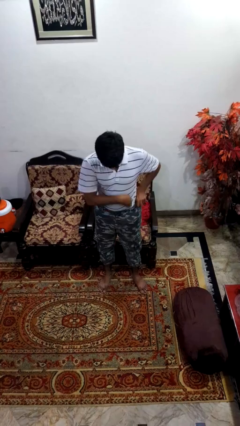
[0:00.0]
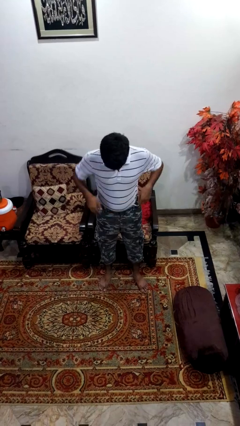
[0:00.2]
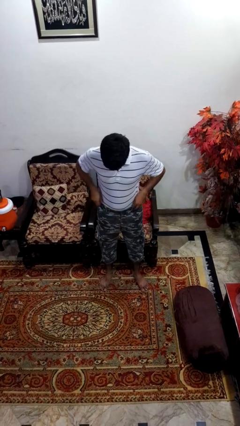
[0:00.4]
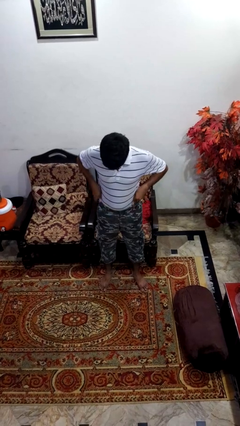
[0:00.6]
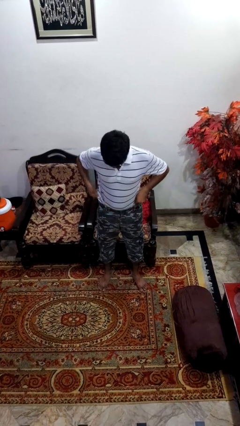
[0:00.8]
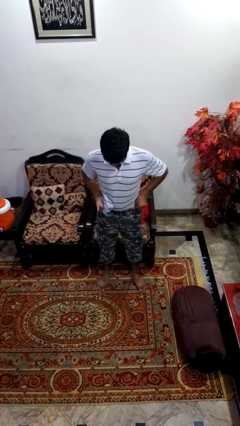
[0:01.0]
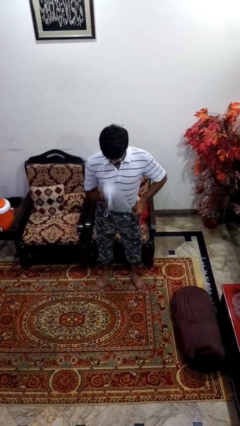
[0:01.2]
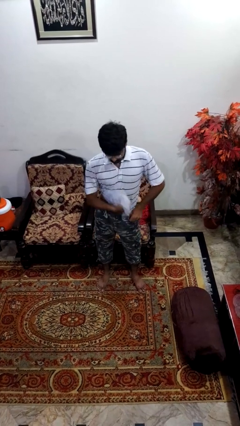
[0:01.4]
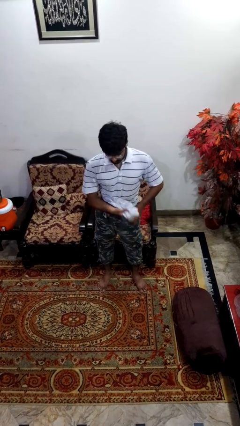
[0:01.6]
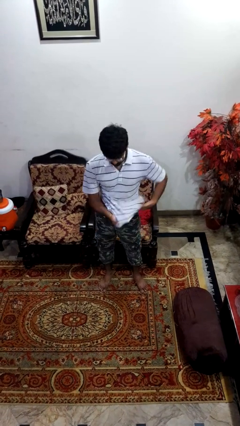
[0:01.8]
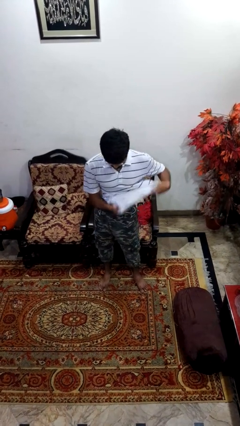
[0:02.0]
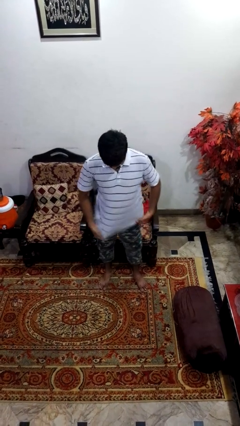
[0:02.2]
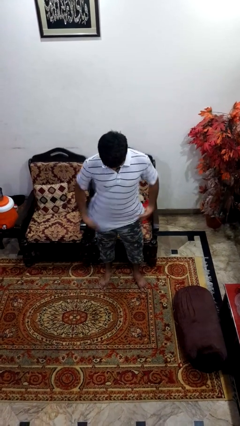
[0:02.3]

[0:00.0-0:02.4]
person untucks shirt

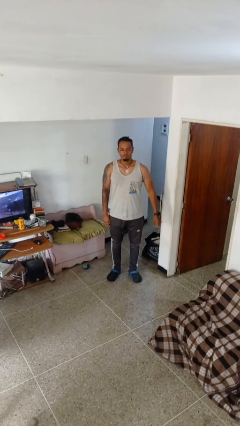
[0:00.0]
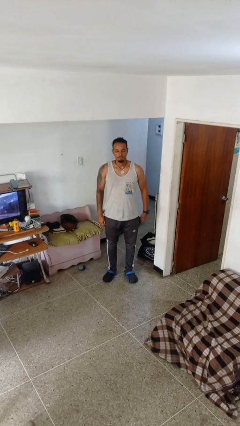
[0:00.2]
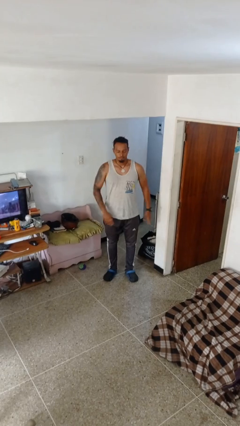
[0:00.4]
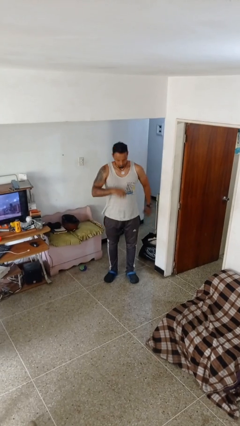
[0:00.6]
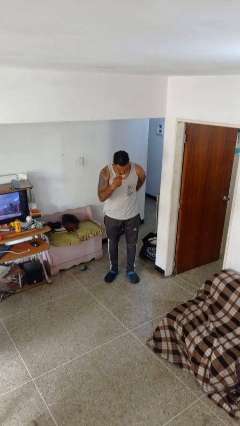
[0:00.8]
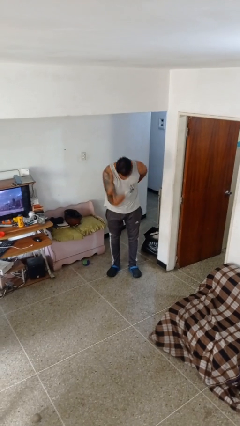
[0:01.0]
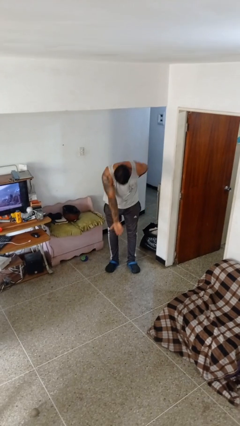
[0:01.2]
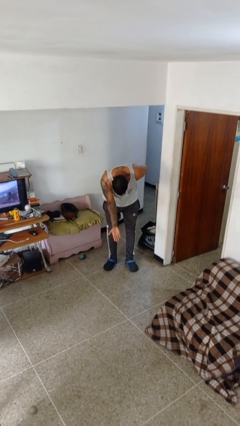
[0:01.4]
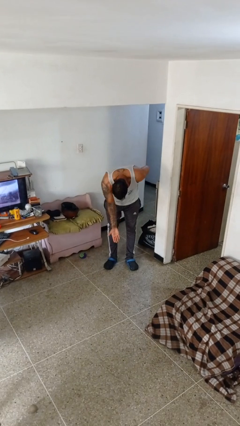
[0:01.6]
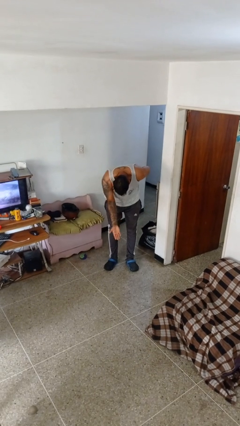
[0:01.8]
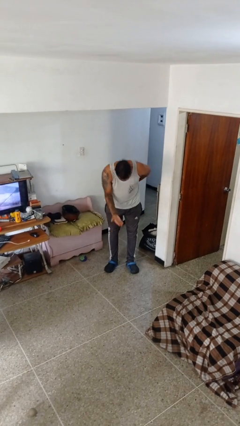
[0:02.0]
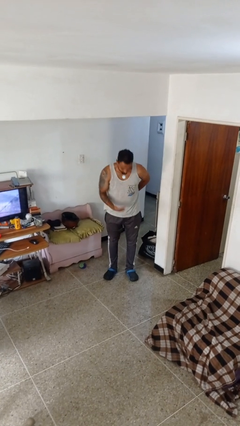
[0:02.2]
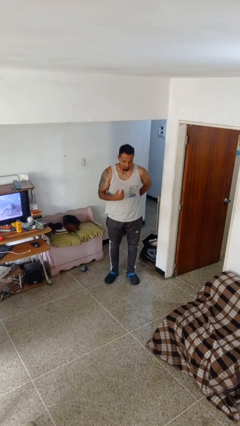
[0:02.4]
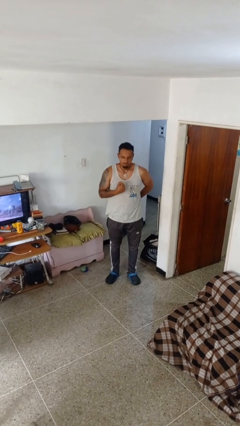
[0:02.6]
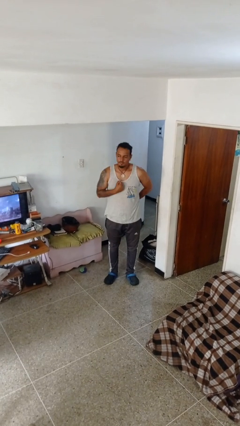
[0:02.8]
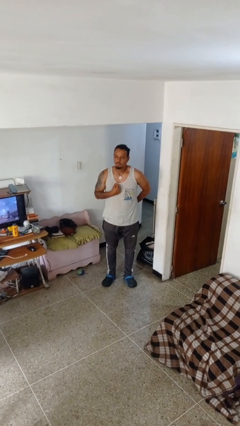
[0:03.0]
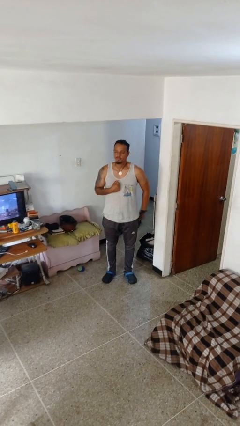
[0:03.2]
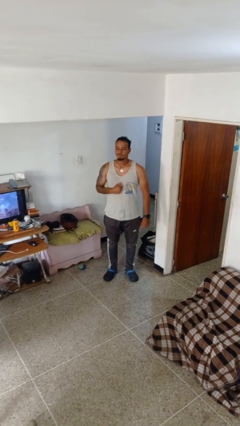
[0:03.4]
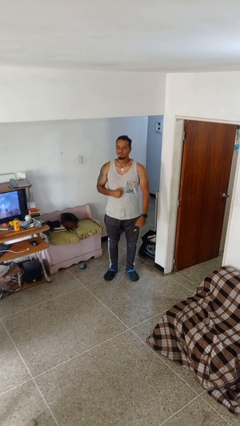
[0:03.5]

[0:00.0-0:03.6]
person bows

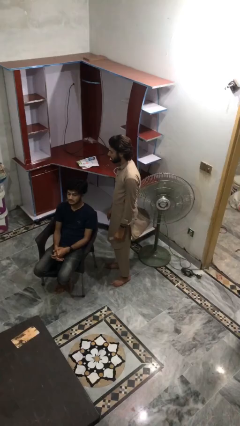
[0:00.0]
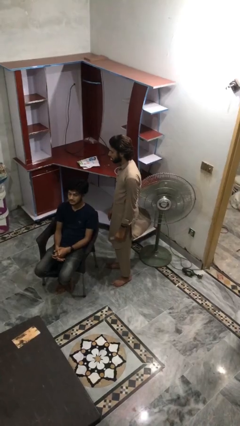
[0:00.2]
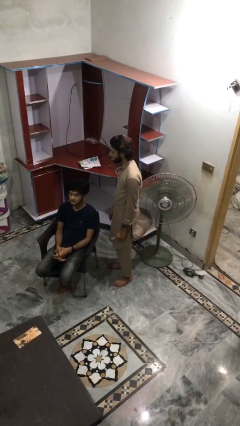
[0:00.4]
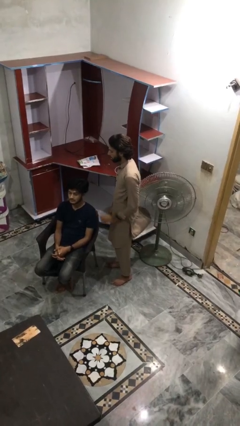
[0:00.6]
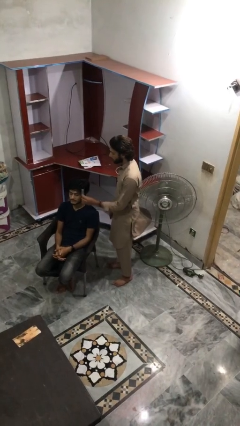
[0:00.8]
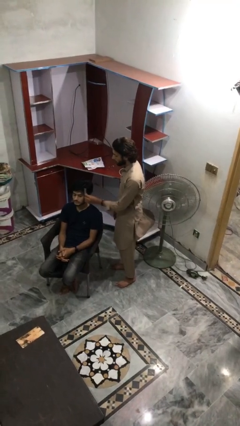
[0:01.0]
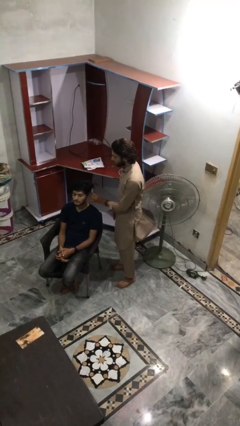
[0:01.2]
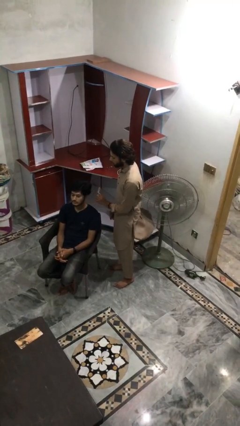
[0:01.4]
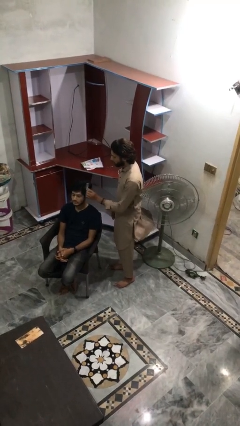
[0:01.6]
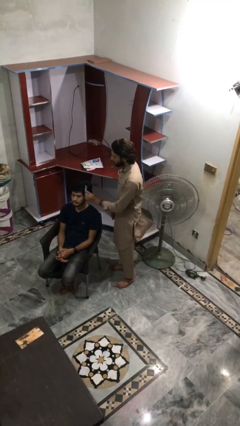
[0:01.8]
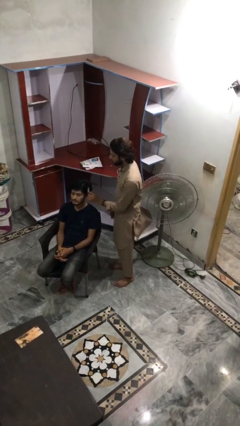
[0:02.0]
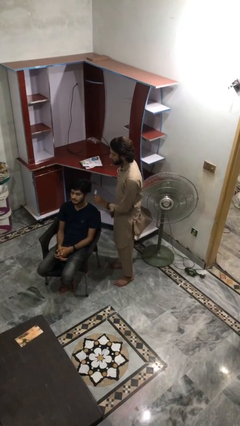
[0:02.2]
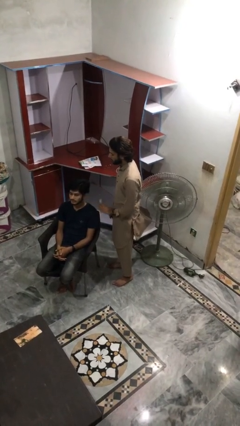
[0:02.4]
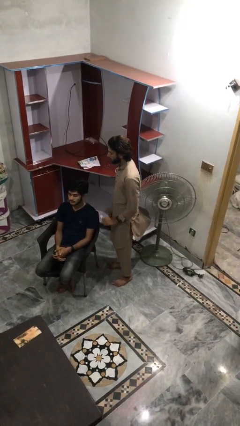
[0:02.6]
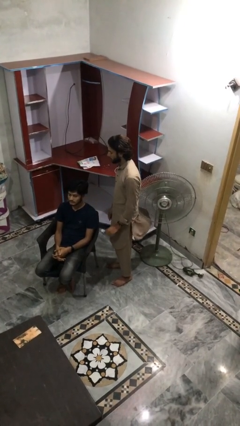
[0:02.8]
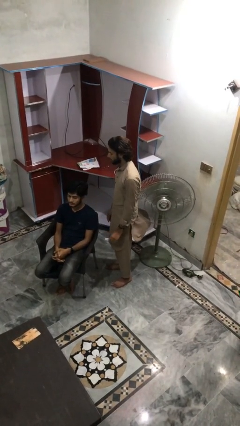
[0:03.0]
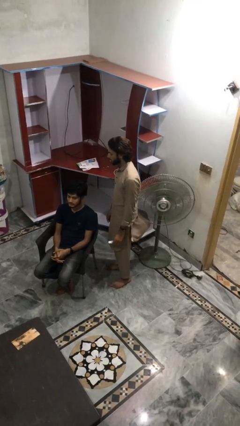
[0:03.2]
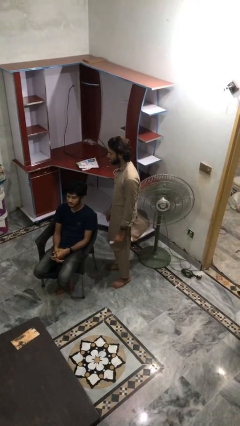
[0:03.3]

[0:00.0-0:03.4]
person brushes hair of person

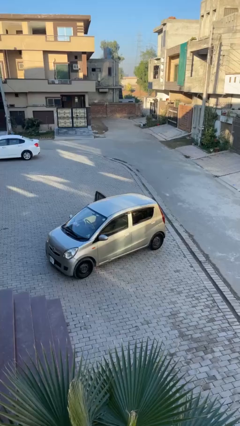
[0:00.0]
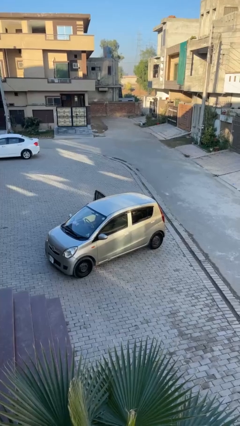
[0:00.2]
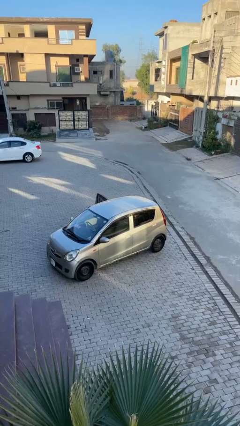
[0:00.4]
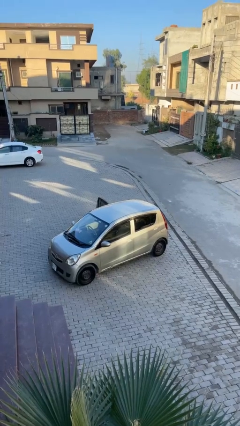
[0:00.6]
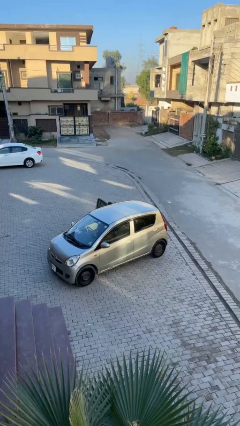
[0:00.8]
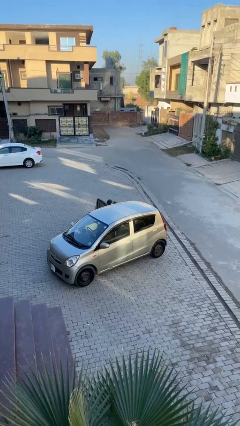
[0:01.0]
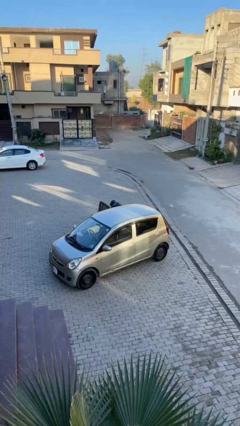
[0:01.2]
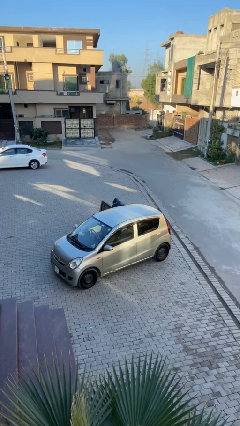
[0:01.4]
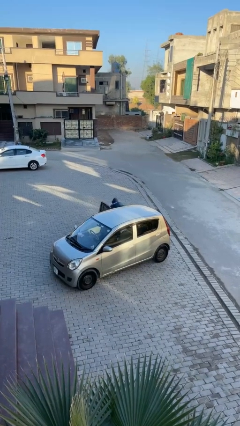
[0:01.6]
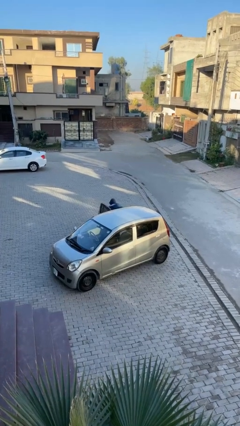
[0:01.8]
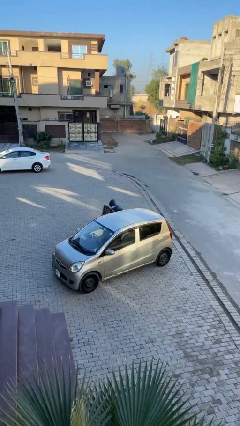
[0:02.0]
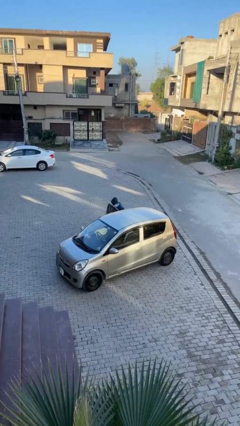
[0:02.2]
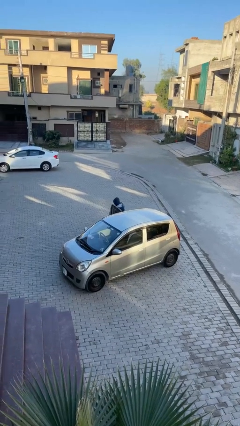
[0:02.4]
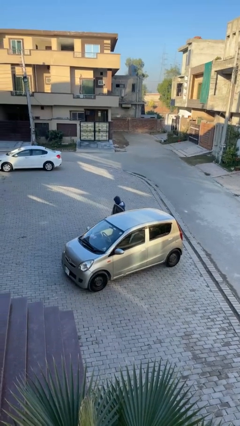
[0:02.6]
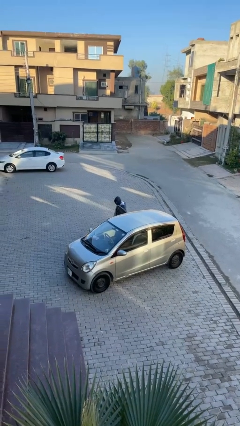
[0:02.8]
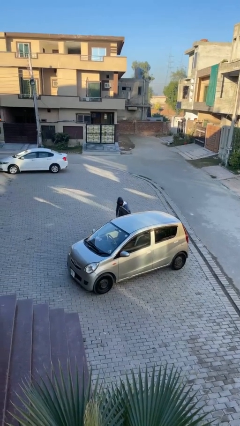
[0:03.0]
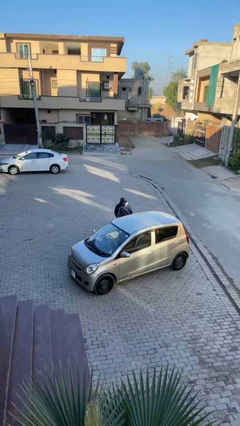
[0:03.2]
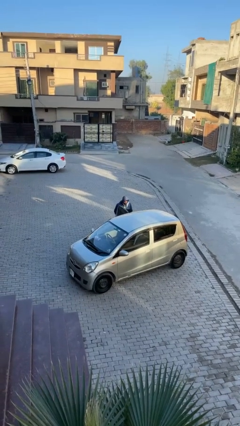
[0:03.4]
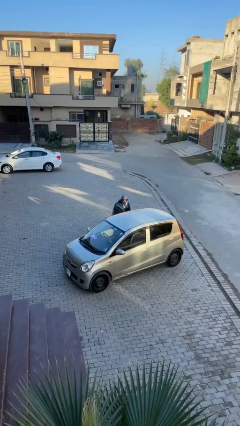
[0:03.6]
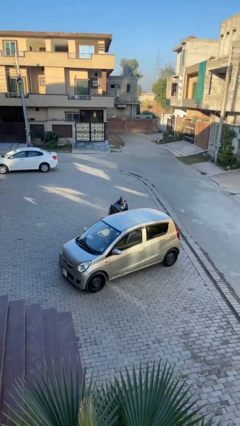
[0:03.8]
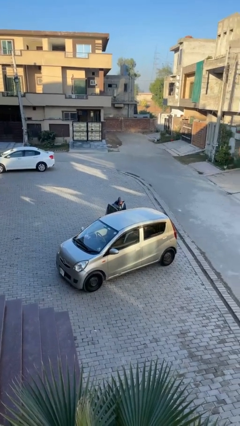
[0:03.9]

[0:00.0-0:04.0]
person exits car

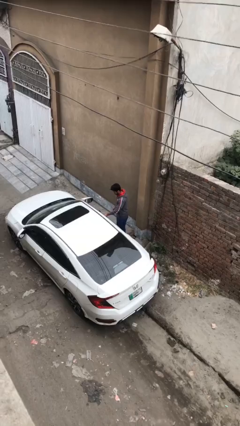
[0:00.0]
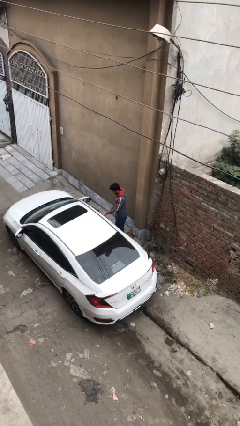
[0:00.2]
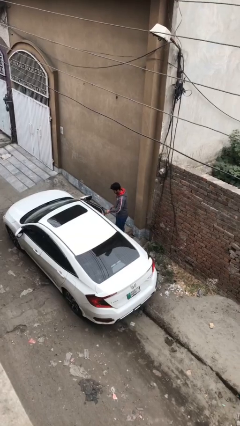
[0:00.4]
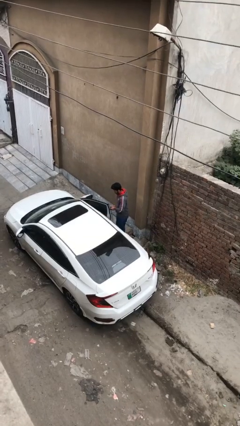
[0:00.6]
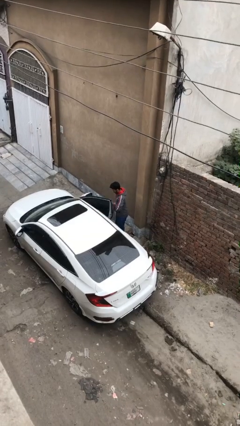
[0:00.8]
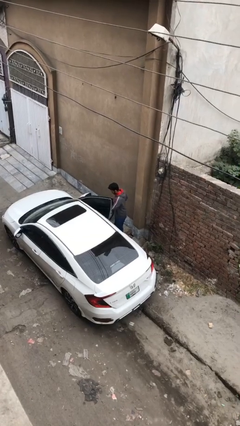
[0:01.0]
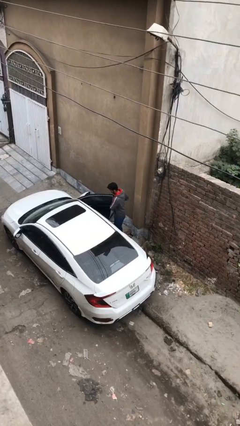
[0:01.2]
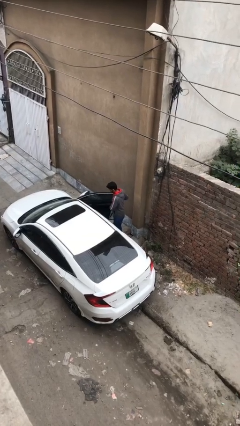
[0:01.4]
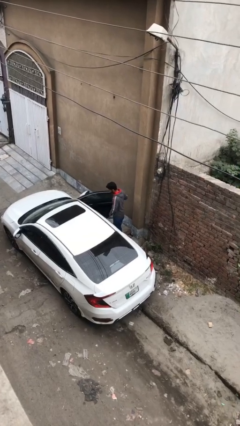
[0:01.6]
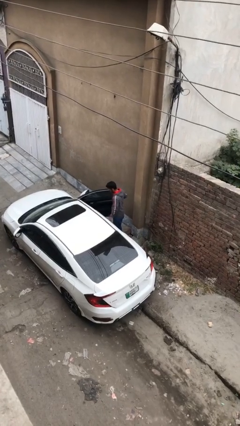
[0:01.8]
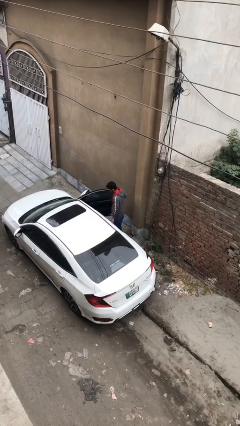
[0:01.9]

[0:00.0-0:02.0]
person opens car door

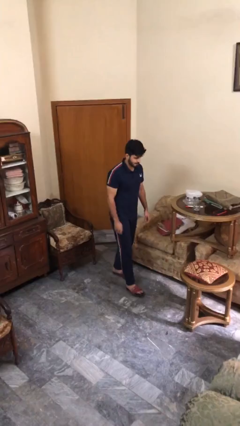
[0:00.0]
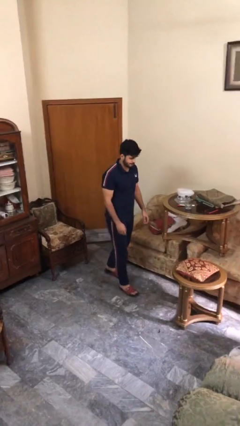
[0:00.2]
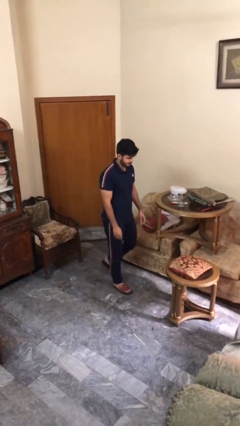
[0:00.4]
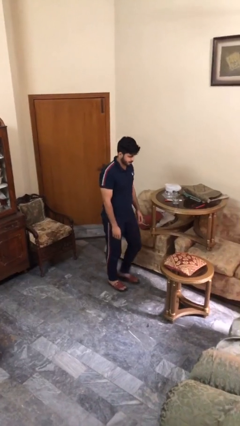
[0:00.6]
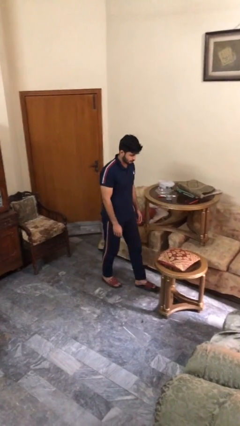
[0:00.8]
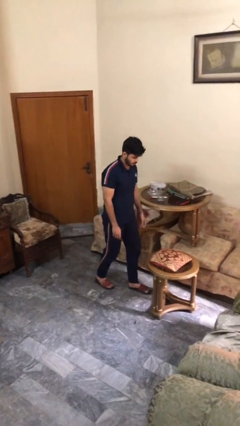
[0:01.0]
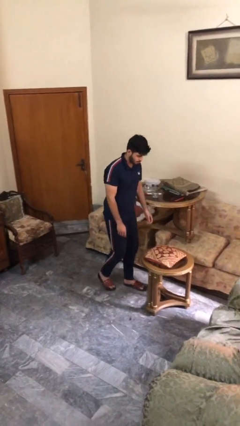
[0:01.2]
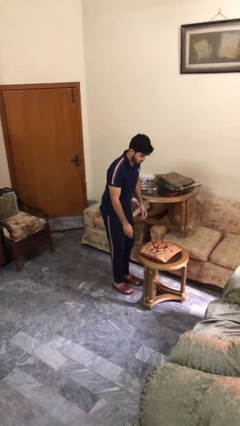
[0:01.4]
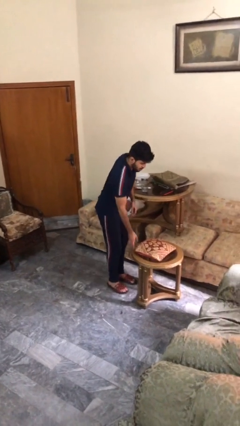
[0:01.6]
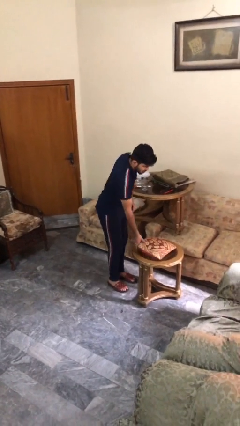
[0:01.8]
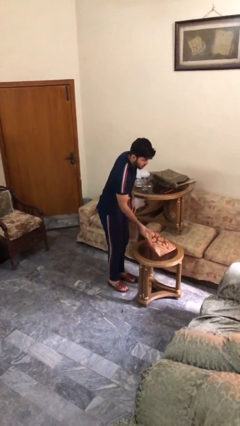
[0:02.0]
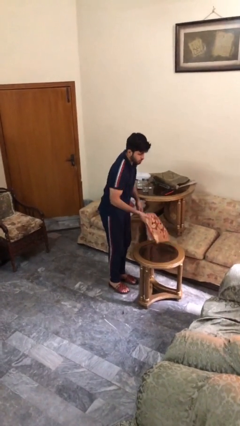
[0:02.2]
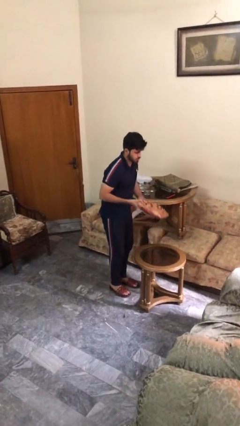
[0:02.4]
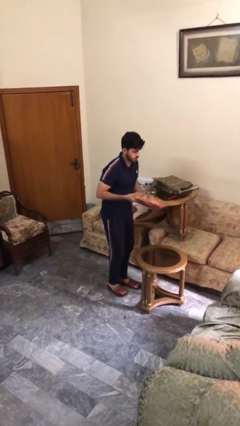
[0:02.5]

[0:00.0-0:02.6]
person picks up object from table
